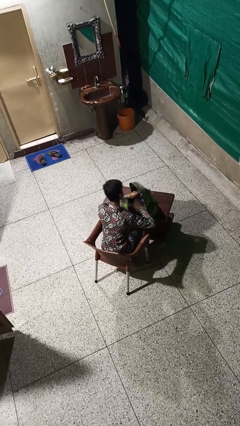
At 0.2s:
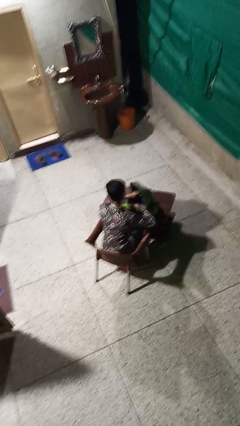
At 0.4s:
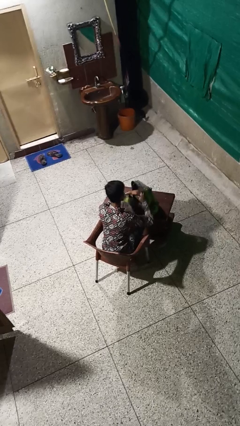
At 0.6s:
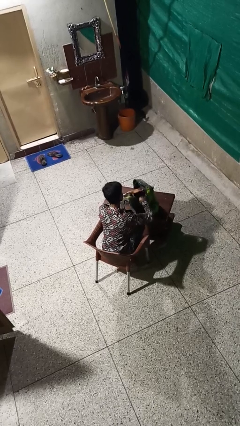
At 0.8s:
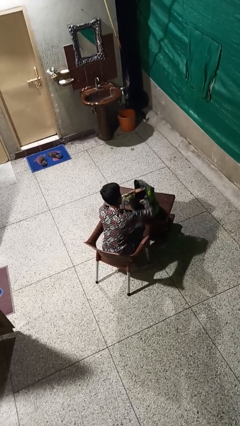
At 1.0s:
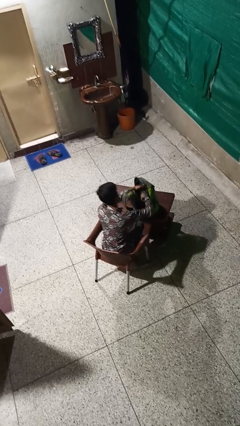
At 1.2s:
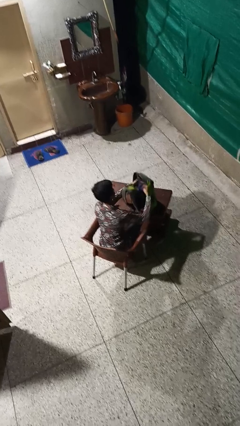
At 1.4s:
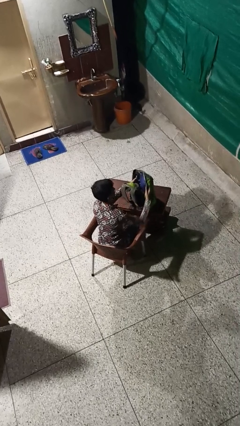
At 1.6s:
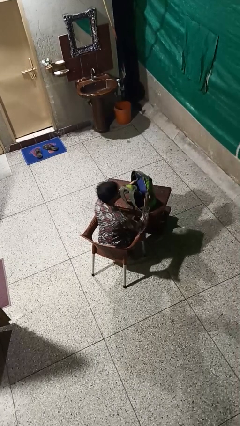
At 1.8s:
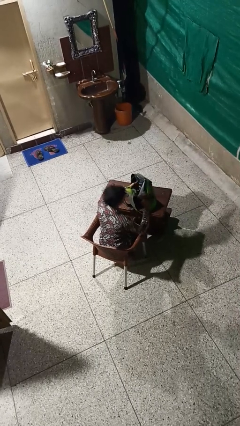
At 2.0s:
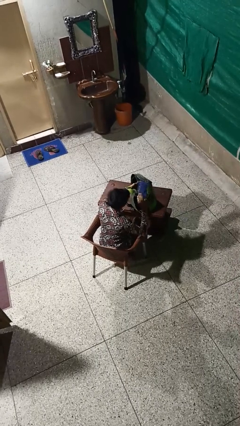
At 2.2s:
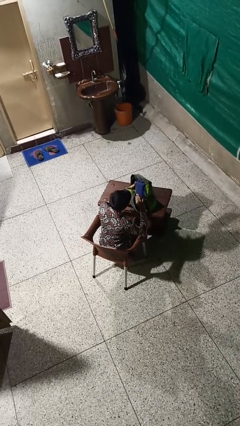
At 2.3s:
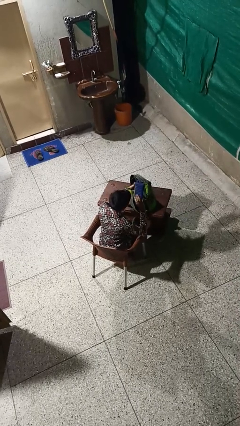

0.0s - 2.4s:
person takes object from backpack

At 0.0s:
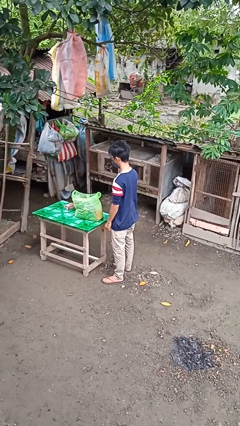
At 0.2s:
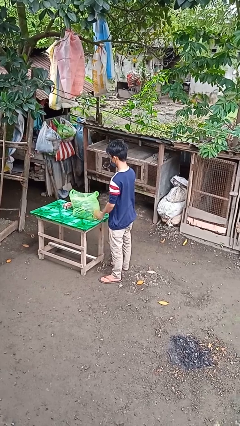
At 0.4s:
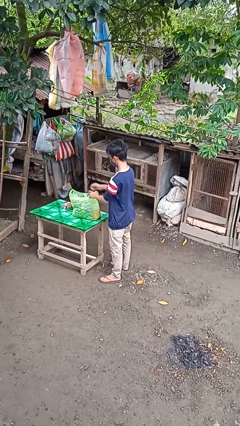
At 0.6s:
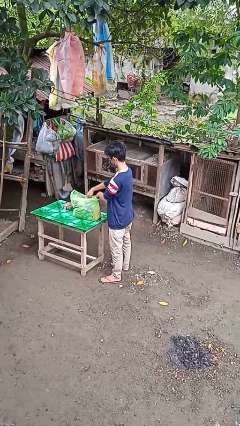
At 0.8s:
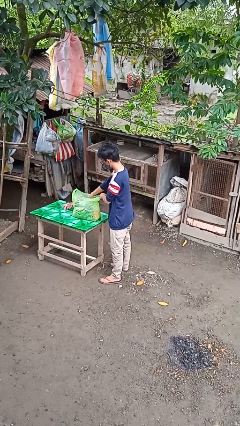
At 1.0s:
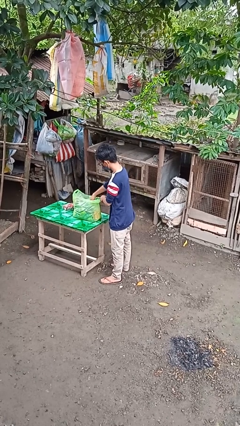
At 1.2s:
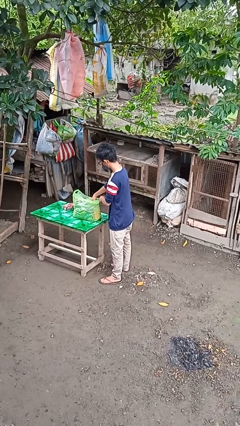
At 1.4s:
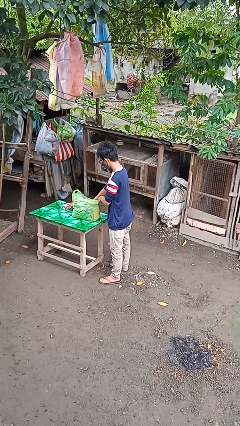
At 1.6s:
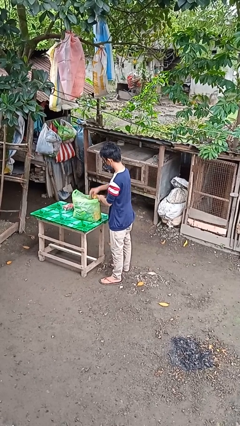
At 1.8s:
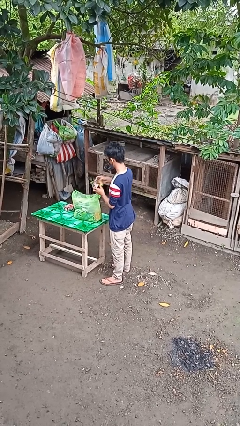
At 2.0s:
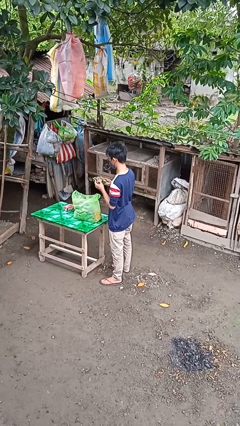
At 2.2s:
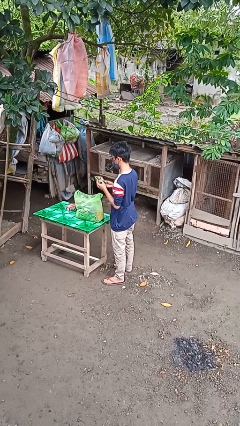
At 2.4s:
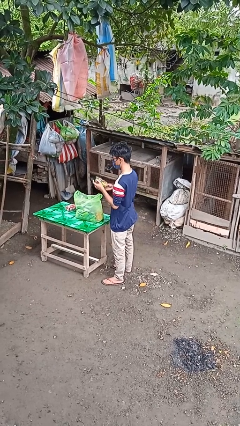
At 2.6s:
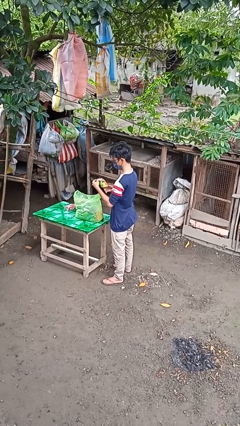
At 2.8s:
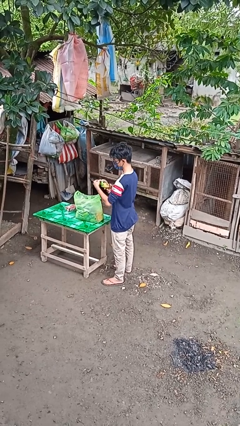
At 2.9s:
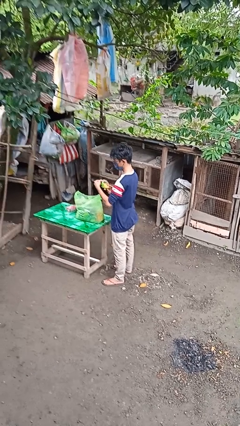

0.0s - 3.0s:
person takes object from bag

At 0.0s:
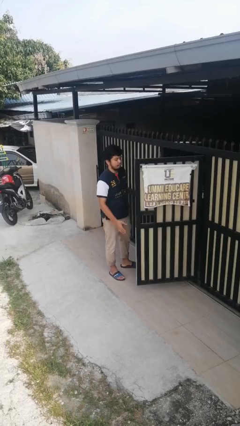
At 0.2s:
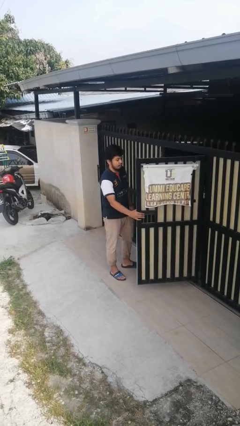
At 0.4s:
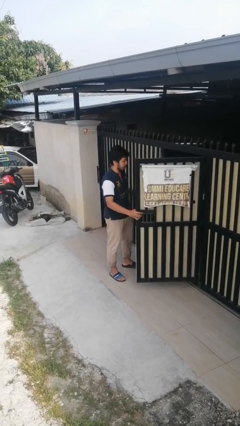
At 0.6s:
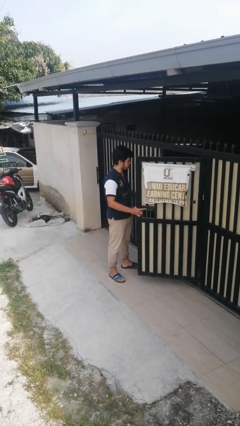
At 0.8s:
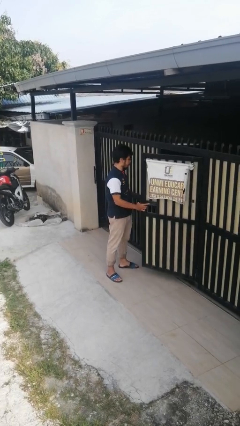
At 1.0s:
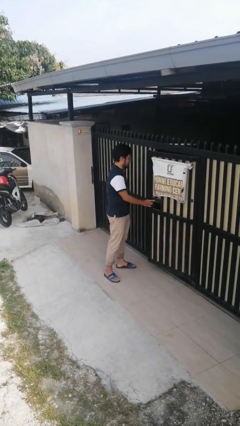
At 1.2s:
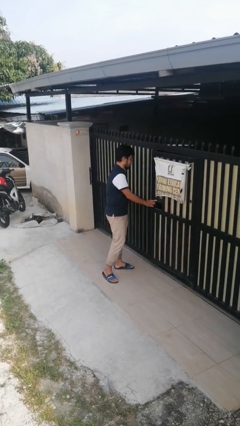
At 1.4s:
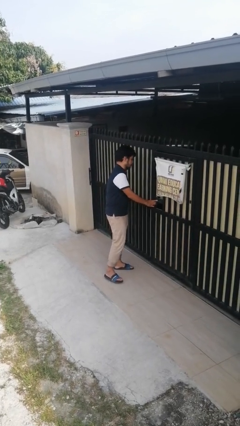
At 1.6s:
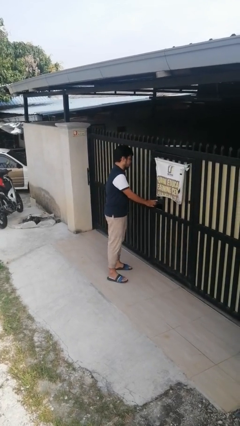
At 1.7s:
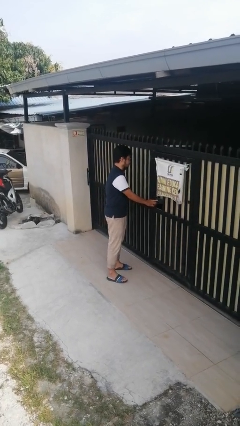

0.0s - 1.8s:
person closes gate

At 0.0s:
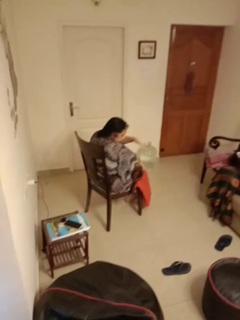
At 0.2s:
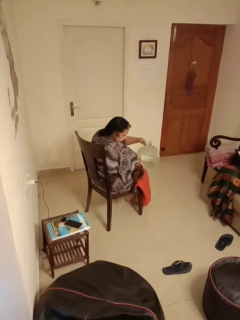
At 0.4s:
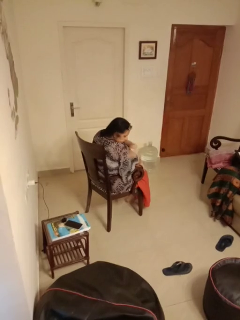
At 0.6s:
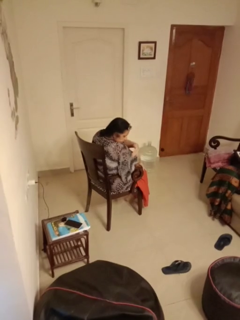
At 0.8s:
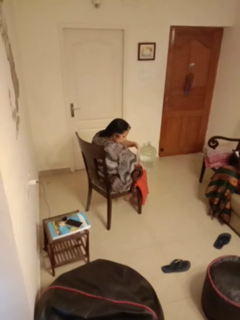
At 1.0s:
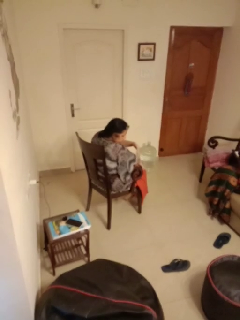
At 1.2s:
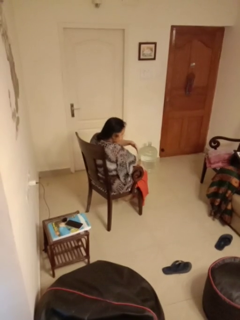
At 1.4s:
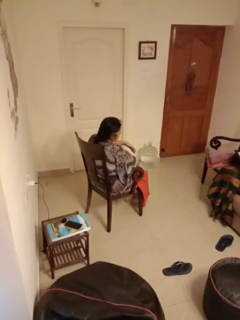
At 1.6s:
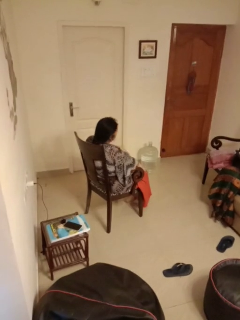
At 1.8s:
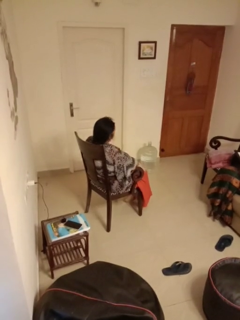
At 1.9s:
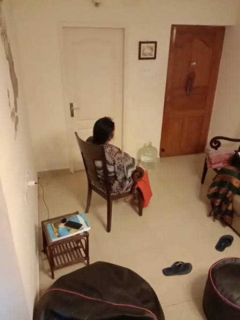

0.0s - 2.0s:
person swats bug

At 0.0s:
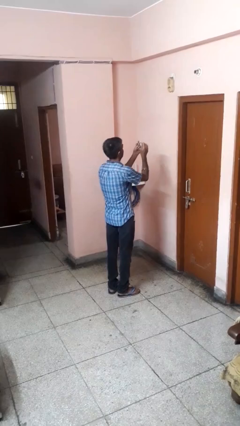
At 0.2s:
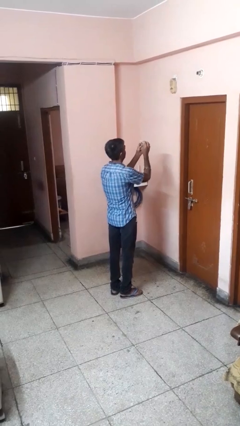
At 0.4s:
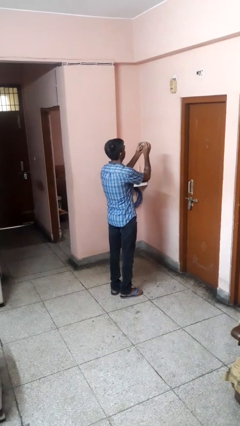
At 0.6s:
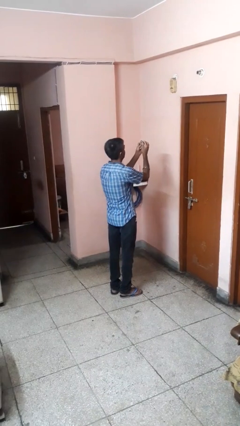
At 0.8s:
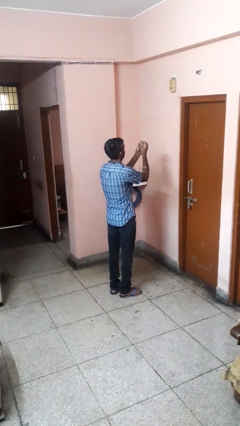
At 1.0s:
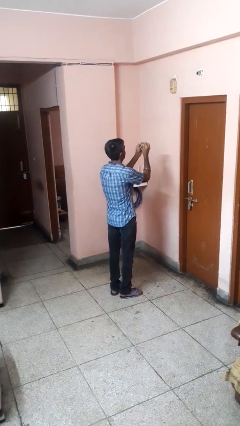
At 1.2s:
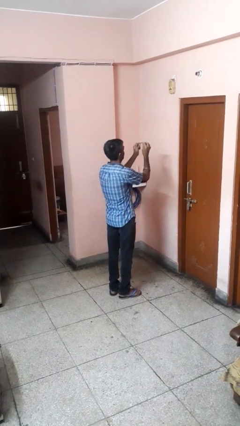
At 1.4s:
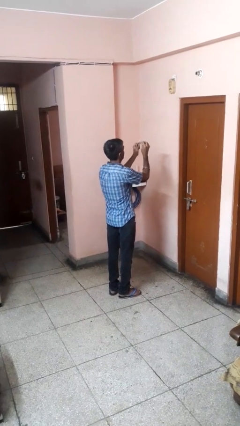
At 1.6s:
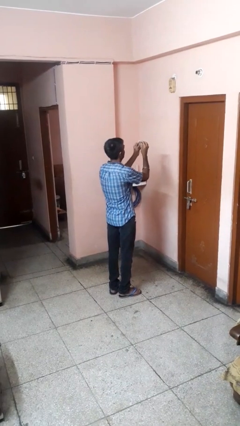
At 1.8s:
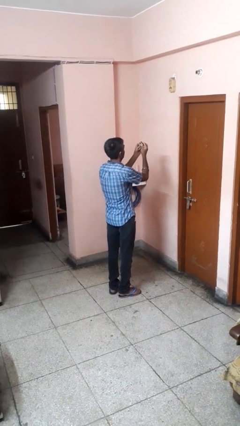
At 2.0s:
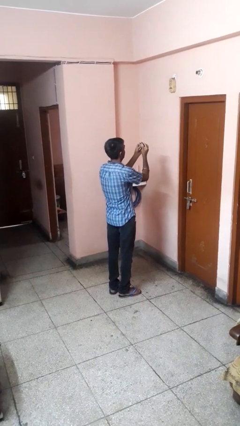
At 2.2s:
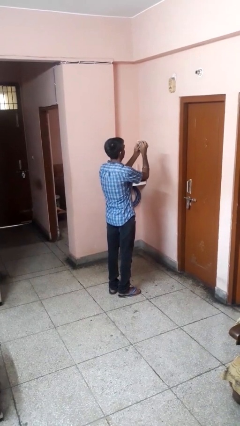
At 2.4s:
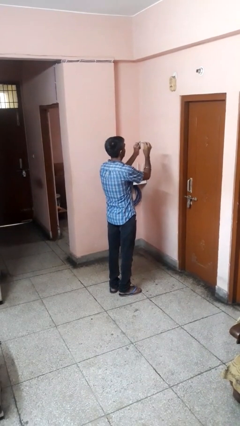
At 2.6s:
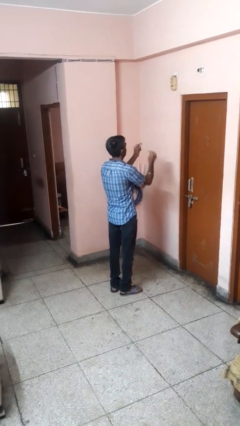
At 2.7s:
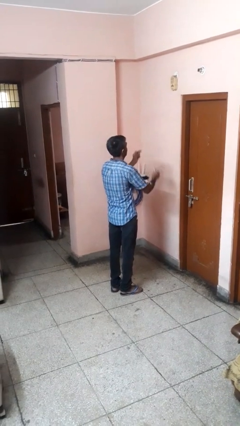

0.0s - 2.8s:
person files fingernails

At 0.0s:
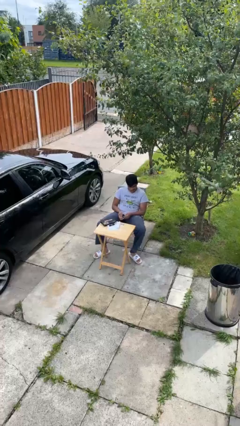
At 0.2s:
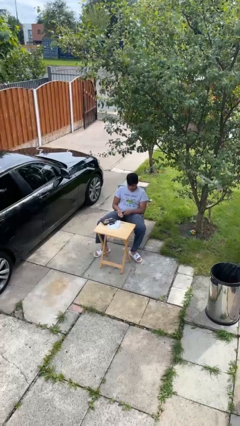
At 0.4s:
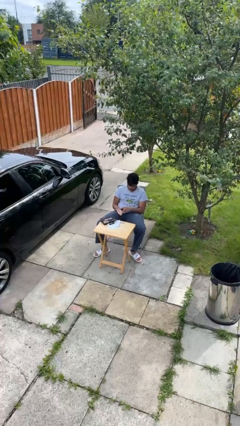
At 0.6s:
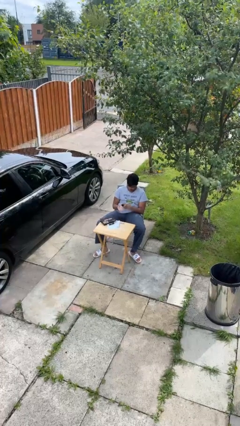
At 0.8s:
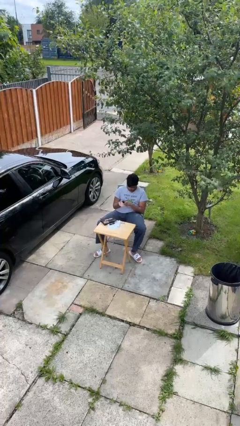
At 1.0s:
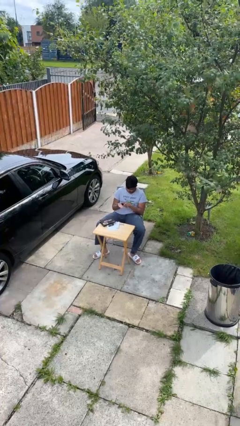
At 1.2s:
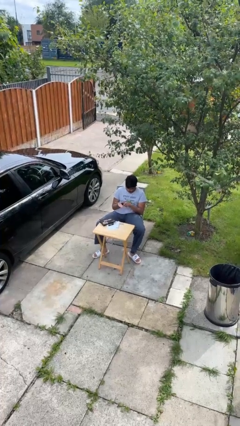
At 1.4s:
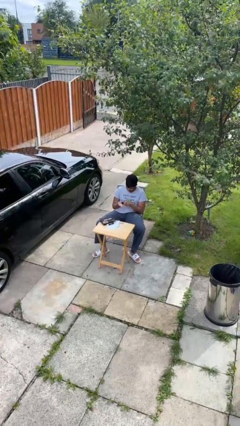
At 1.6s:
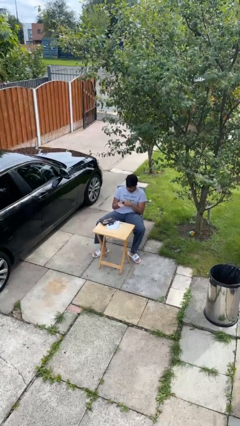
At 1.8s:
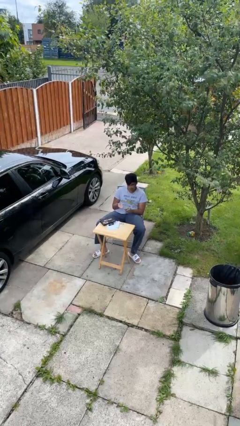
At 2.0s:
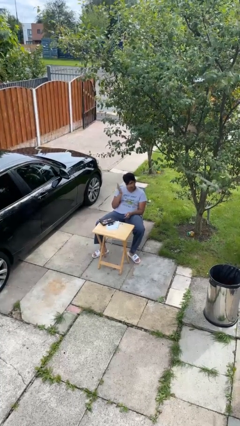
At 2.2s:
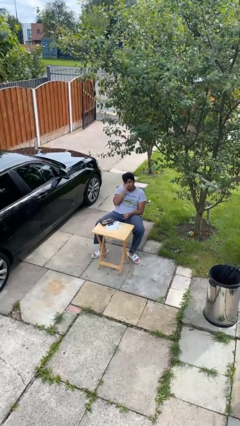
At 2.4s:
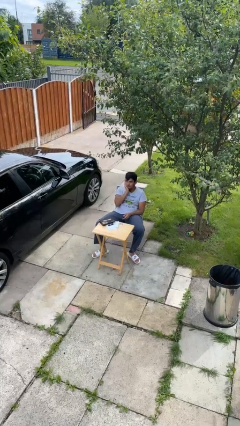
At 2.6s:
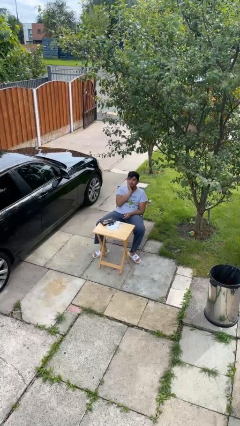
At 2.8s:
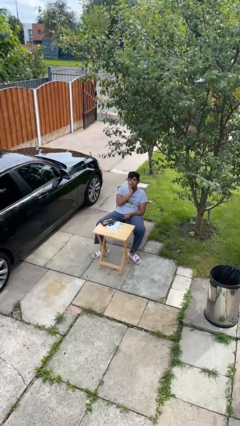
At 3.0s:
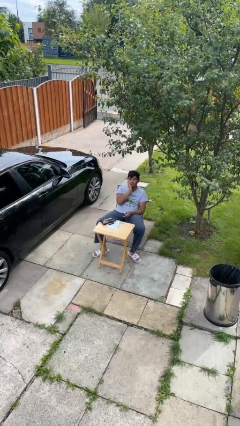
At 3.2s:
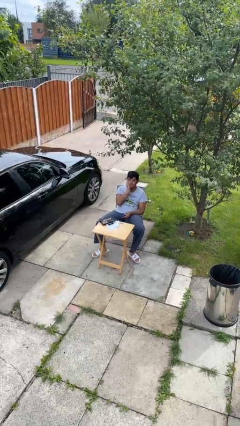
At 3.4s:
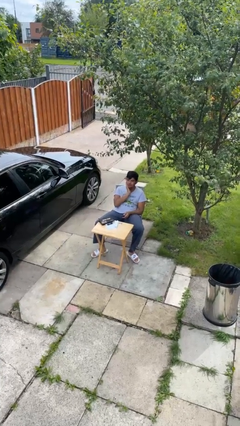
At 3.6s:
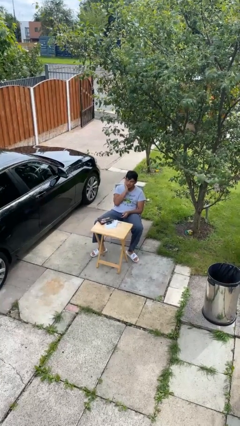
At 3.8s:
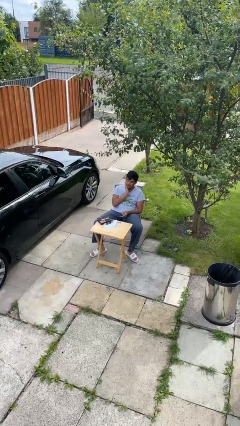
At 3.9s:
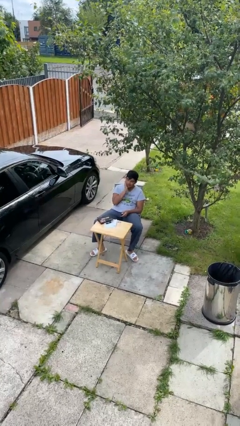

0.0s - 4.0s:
person applies foundation makeup

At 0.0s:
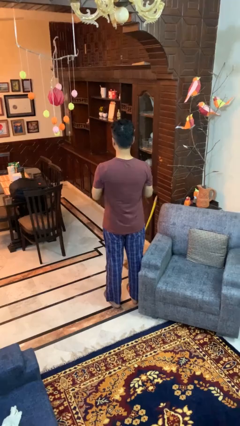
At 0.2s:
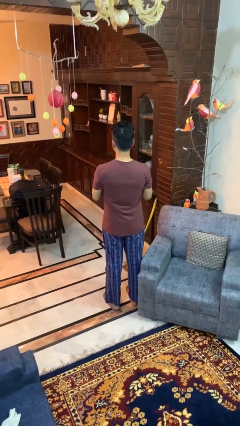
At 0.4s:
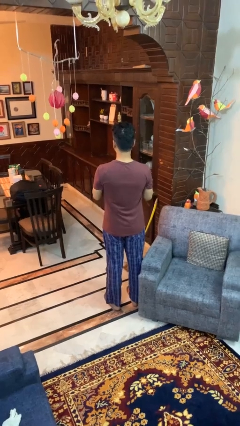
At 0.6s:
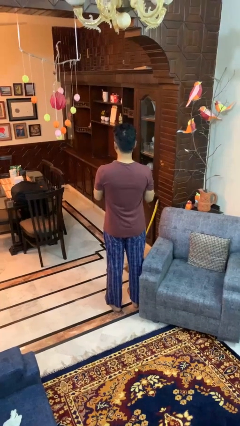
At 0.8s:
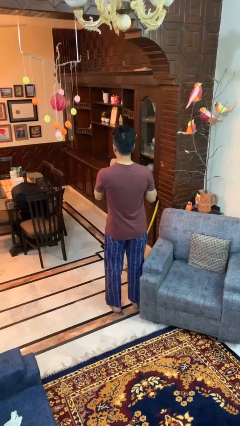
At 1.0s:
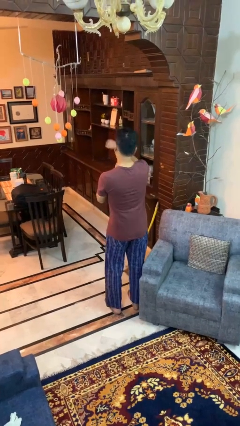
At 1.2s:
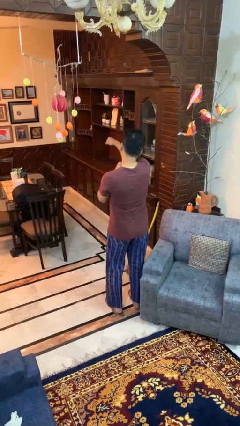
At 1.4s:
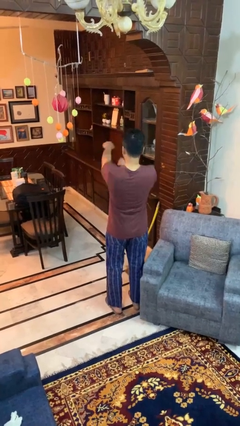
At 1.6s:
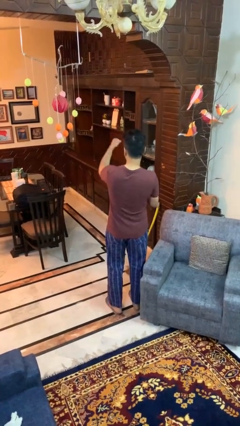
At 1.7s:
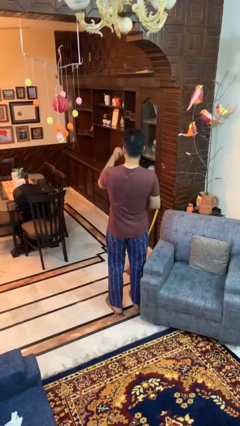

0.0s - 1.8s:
person punches
